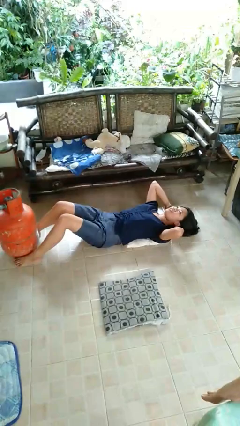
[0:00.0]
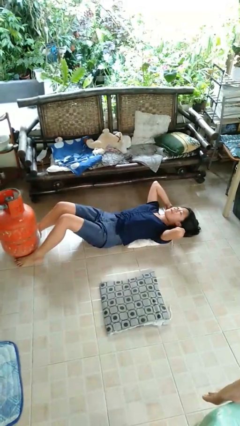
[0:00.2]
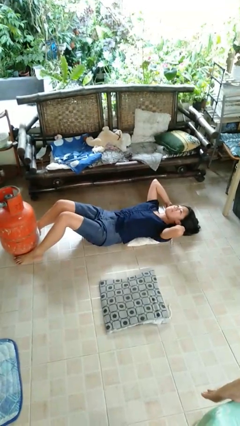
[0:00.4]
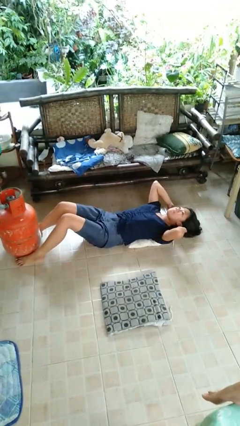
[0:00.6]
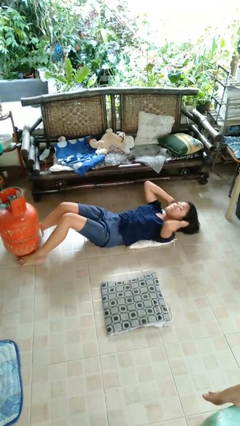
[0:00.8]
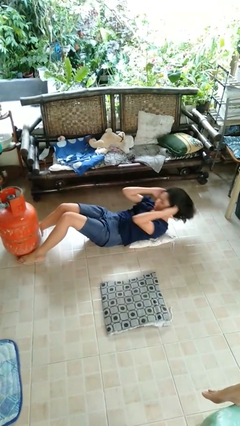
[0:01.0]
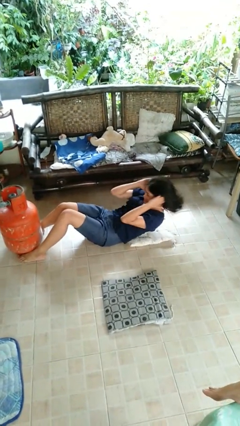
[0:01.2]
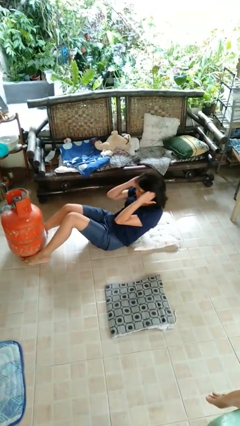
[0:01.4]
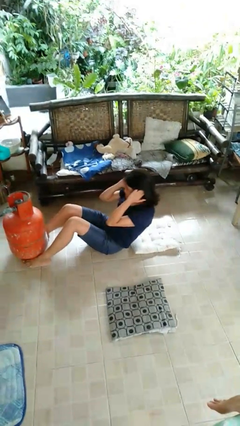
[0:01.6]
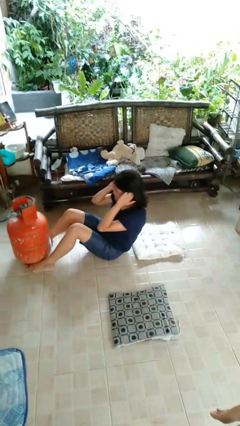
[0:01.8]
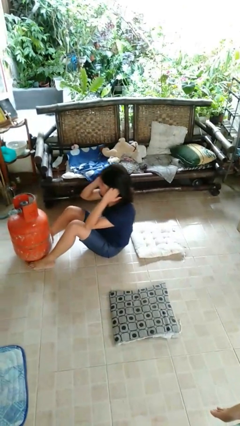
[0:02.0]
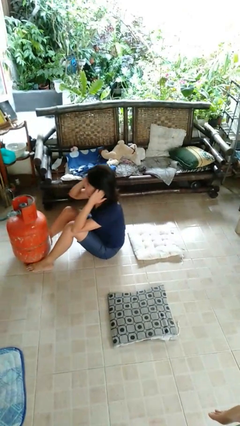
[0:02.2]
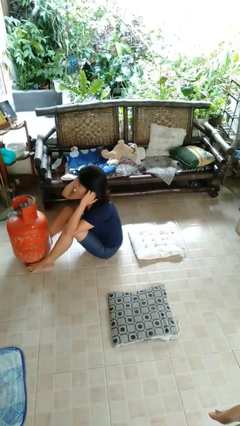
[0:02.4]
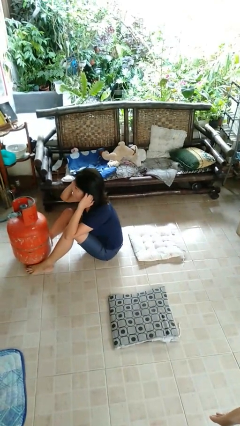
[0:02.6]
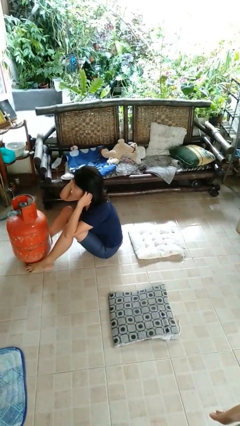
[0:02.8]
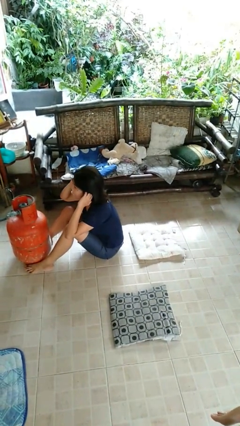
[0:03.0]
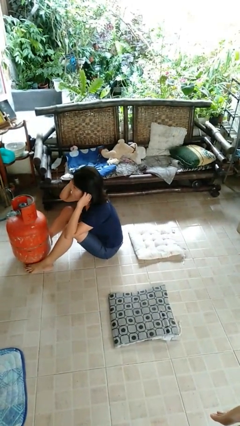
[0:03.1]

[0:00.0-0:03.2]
person exercises with situp

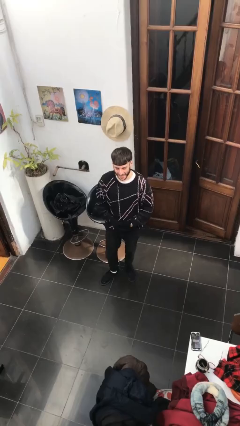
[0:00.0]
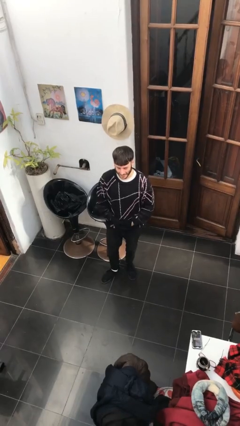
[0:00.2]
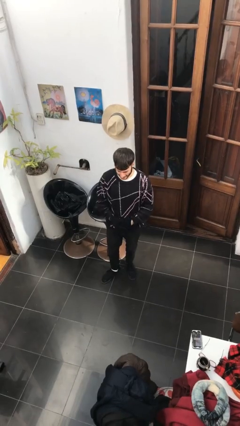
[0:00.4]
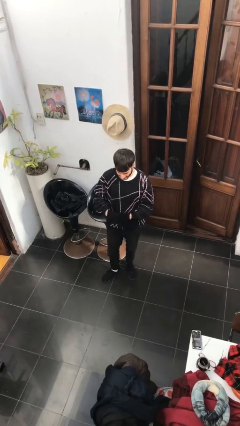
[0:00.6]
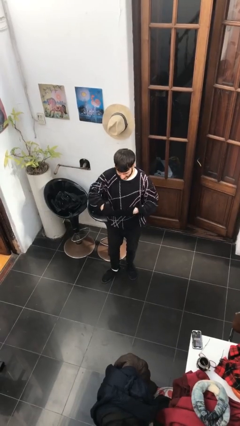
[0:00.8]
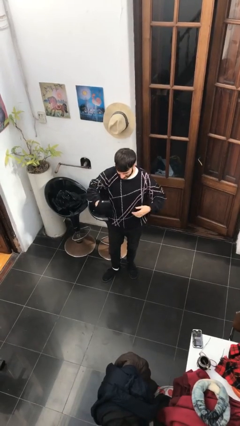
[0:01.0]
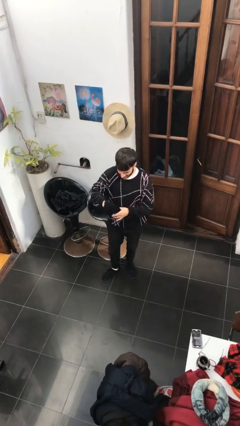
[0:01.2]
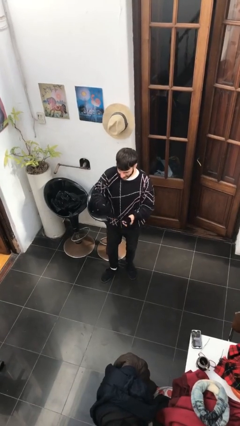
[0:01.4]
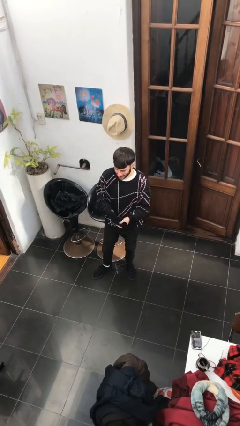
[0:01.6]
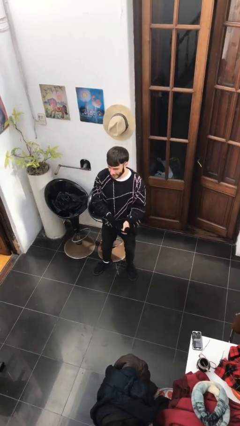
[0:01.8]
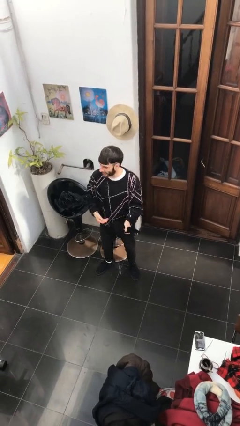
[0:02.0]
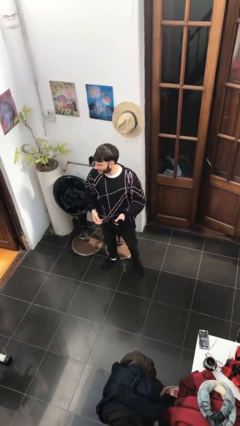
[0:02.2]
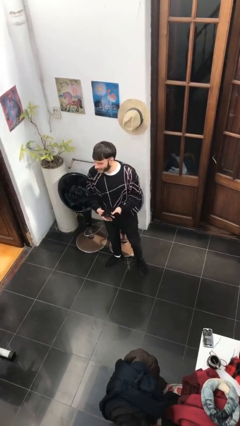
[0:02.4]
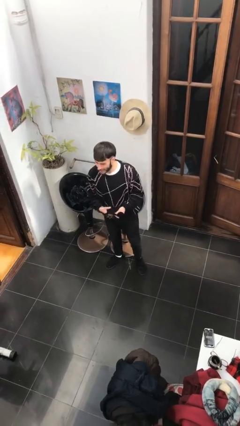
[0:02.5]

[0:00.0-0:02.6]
person takes off gloves

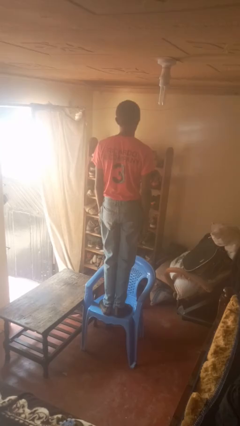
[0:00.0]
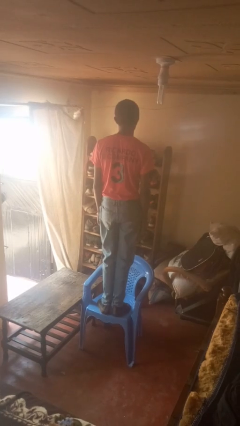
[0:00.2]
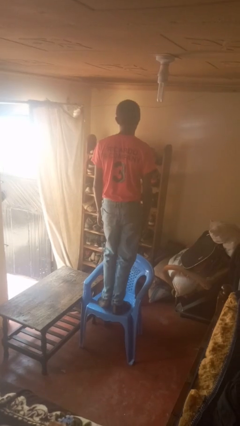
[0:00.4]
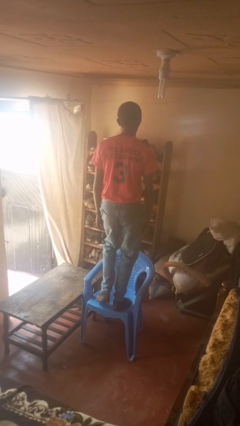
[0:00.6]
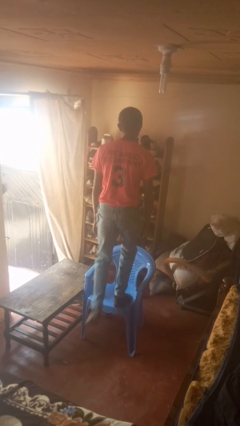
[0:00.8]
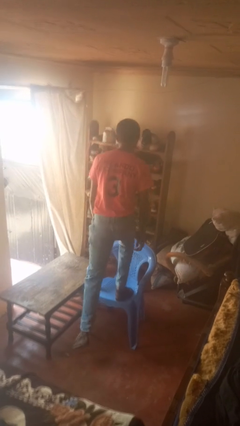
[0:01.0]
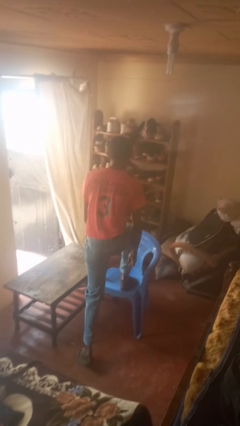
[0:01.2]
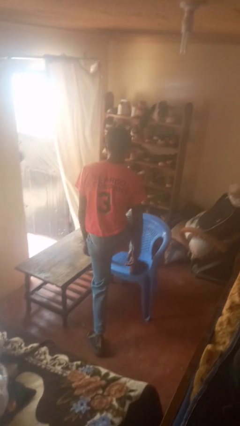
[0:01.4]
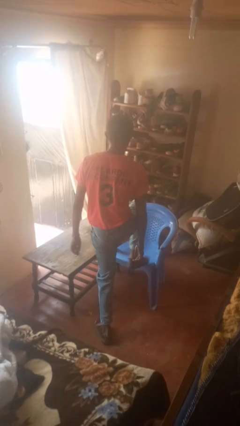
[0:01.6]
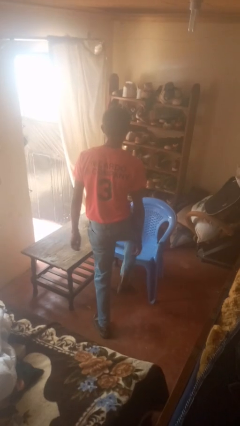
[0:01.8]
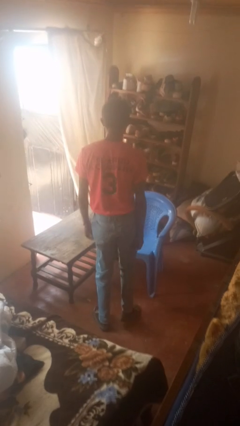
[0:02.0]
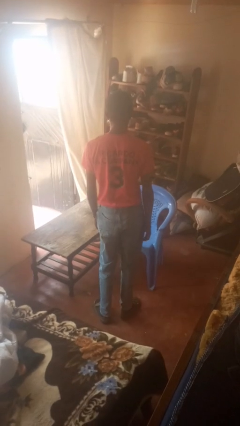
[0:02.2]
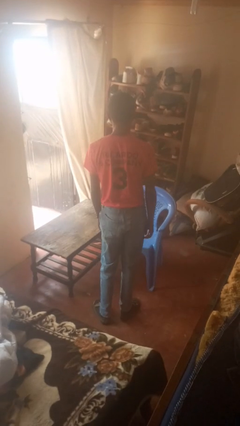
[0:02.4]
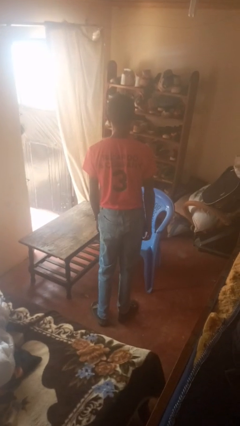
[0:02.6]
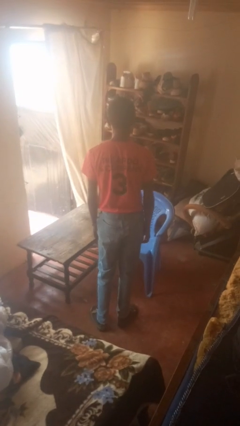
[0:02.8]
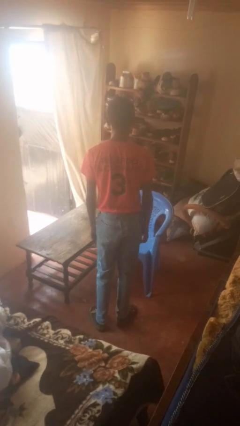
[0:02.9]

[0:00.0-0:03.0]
person climbs off chair

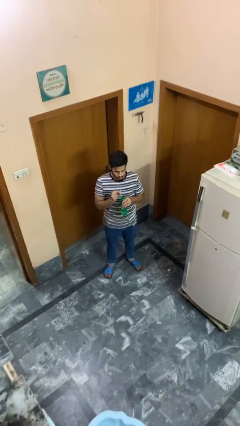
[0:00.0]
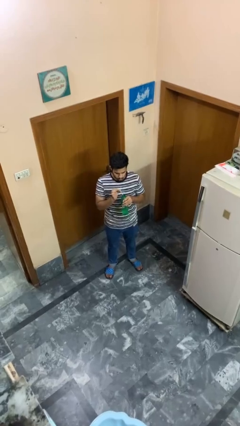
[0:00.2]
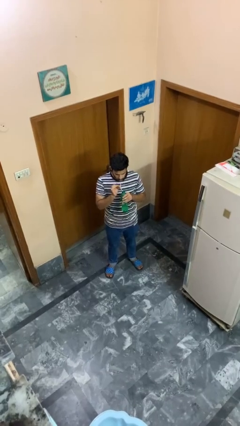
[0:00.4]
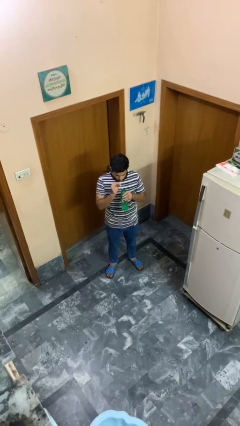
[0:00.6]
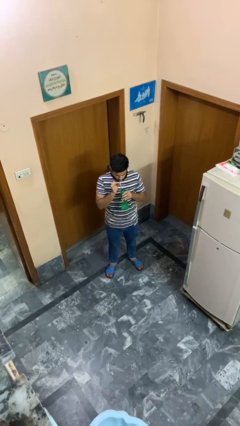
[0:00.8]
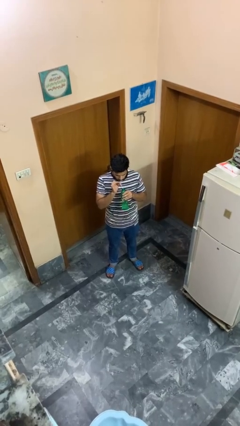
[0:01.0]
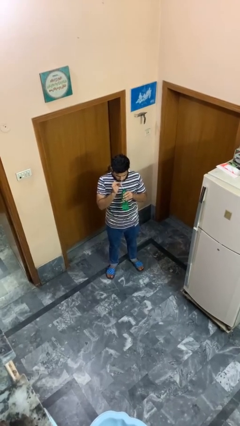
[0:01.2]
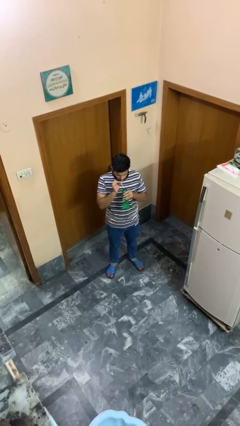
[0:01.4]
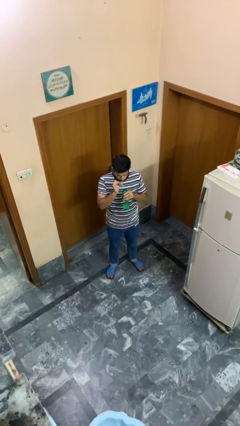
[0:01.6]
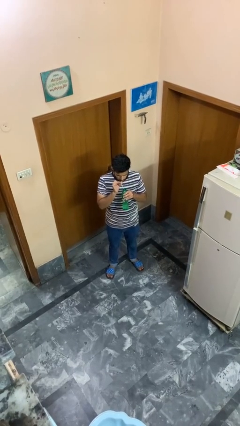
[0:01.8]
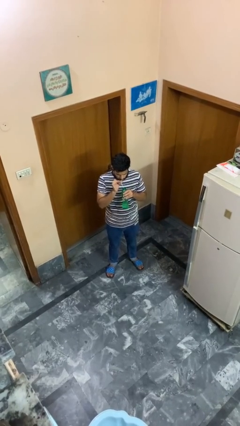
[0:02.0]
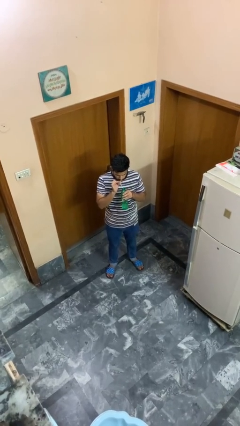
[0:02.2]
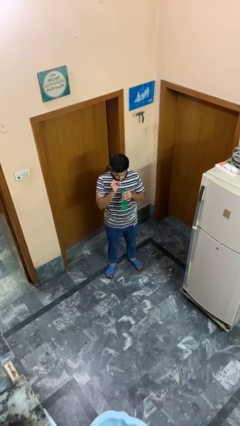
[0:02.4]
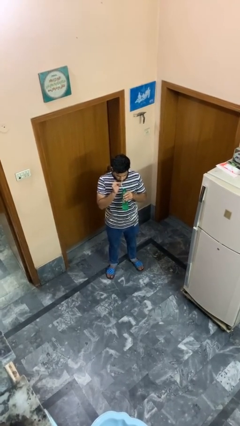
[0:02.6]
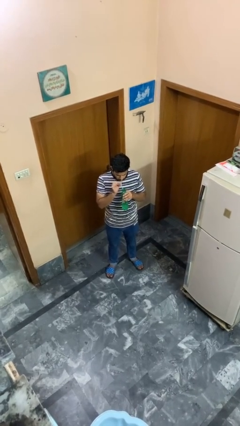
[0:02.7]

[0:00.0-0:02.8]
person drinks from straw

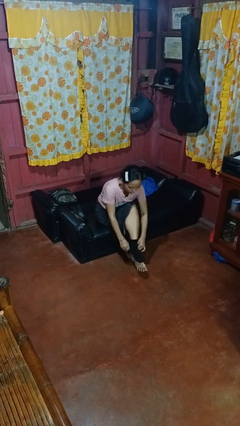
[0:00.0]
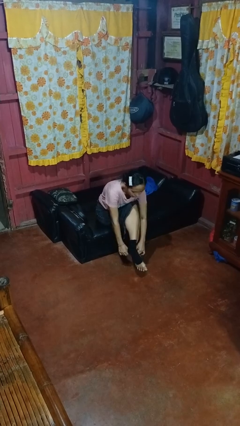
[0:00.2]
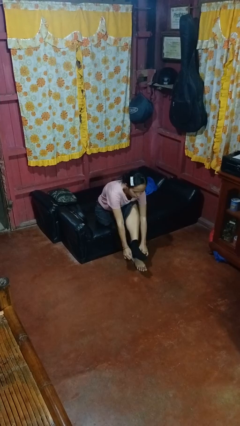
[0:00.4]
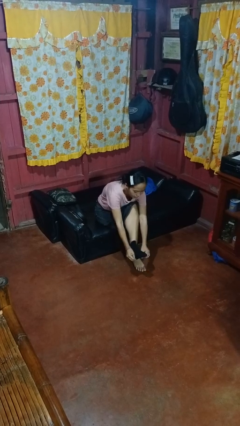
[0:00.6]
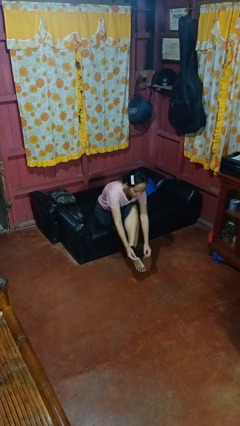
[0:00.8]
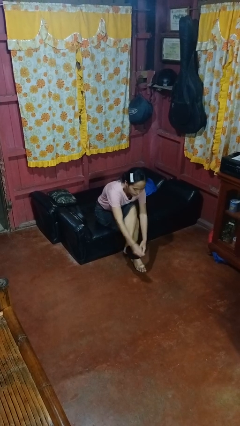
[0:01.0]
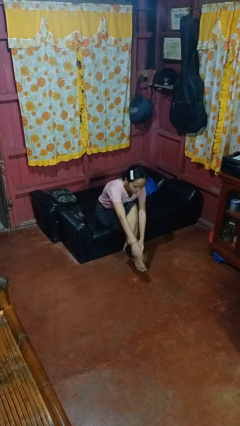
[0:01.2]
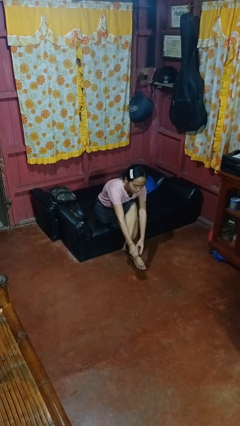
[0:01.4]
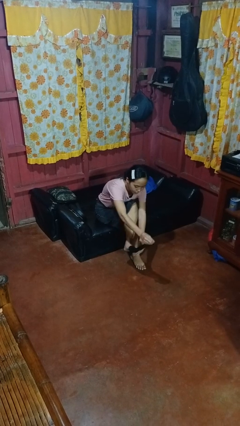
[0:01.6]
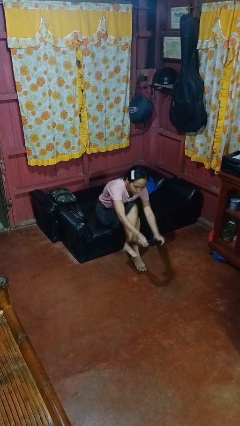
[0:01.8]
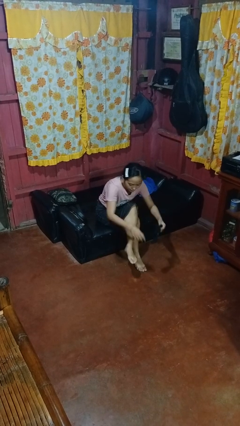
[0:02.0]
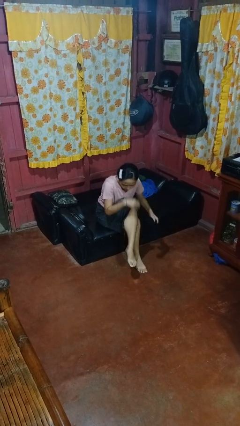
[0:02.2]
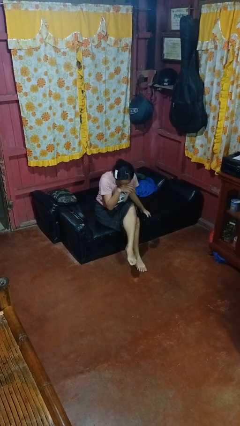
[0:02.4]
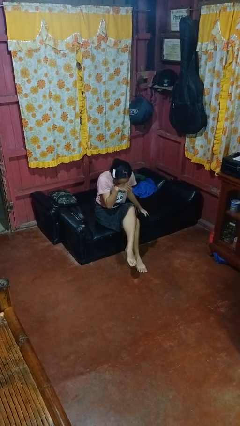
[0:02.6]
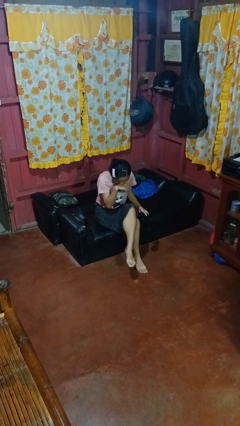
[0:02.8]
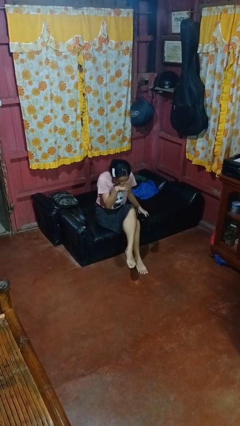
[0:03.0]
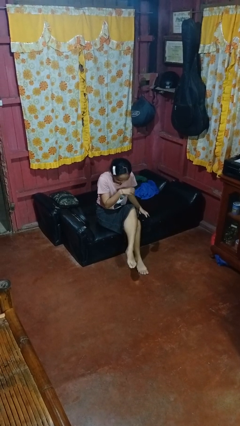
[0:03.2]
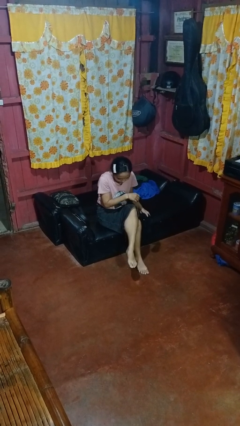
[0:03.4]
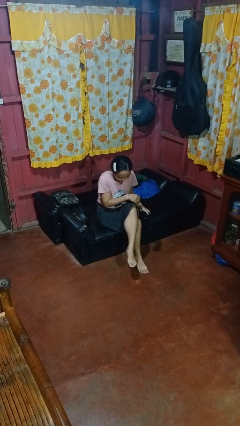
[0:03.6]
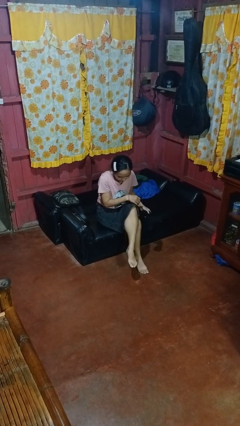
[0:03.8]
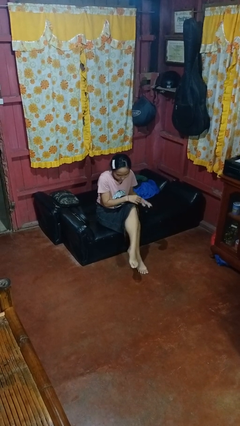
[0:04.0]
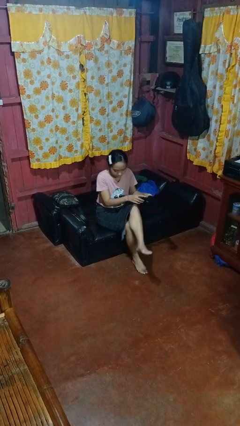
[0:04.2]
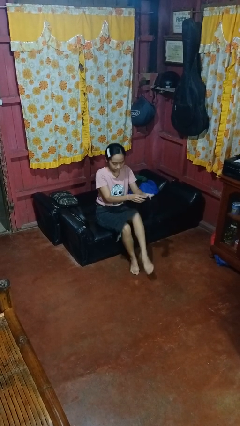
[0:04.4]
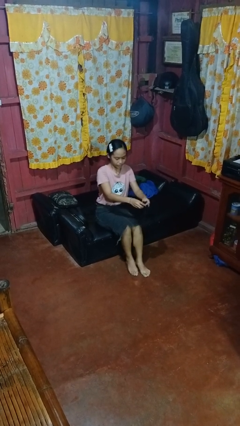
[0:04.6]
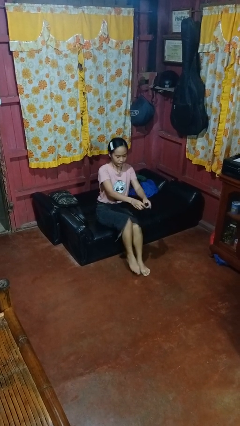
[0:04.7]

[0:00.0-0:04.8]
person takes off socks

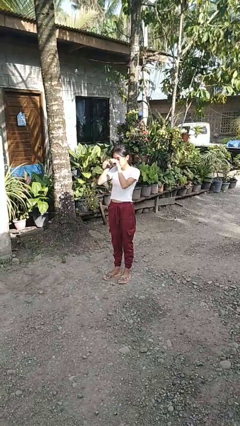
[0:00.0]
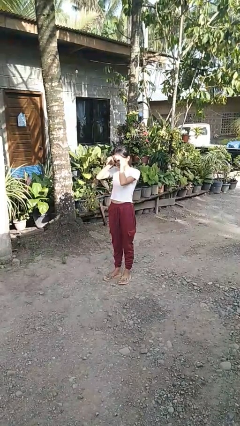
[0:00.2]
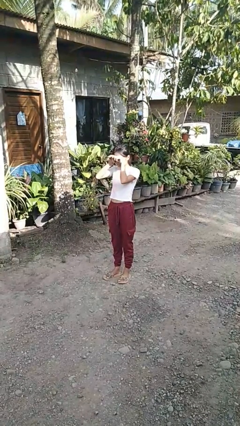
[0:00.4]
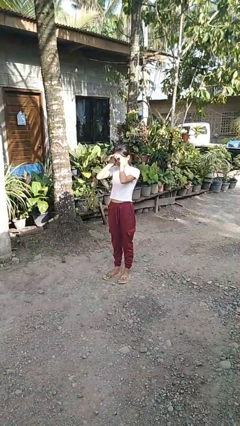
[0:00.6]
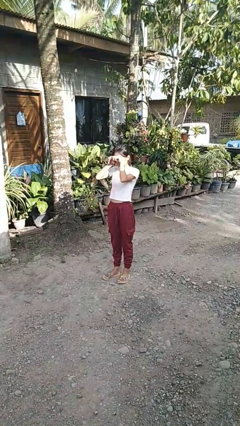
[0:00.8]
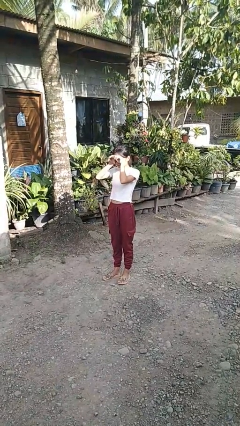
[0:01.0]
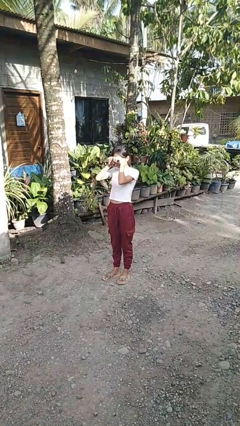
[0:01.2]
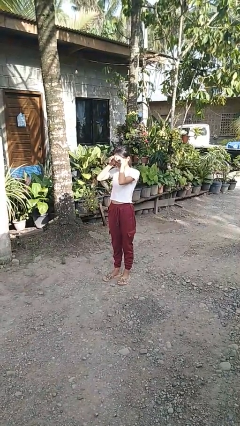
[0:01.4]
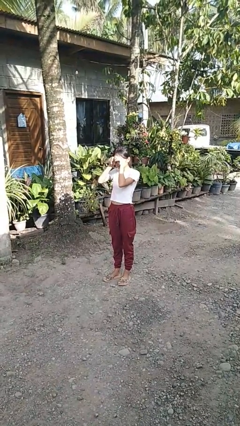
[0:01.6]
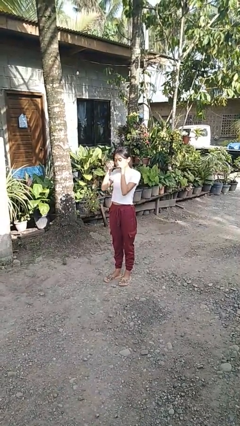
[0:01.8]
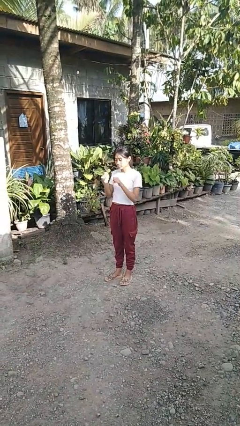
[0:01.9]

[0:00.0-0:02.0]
person rubs eyes
